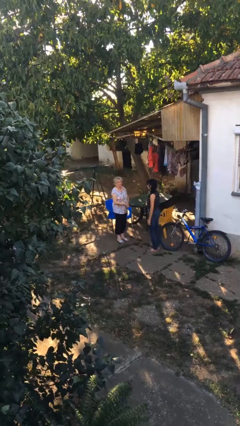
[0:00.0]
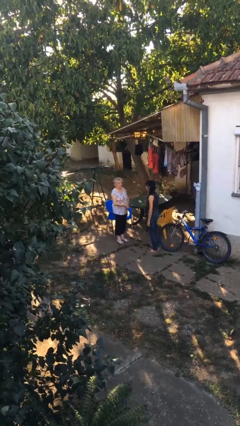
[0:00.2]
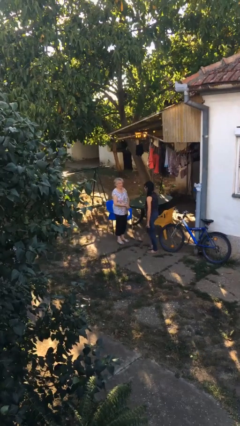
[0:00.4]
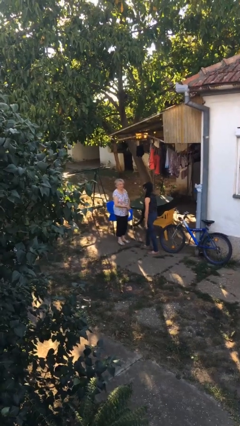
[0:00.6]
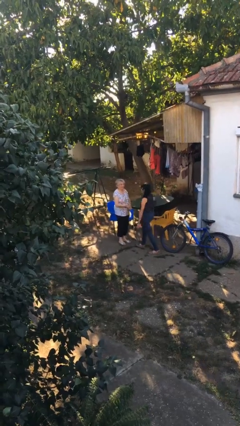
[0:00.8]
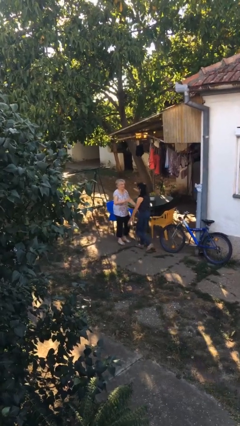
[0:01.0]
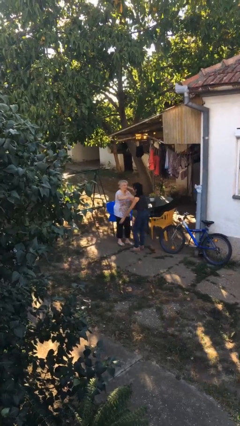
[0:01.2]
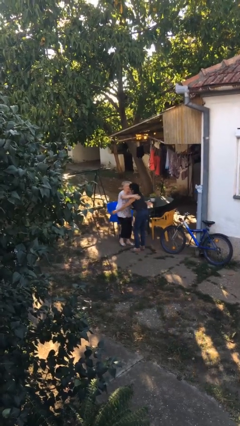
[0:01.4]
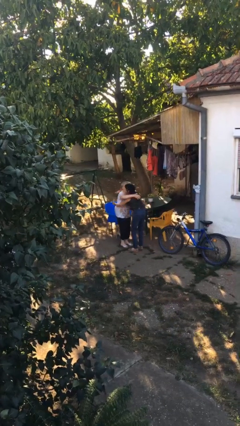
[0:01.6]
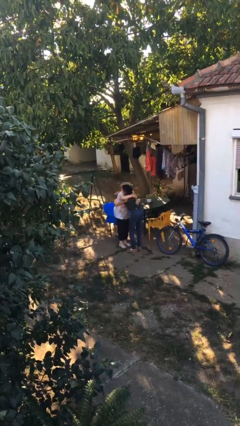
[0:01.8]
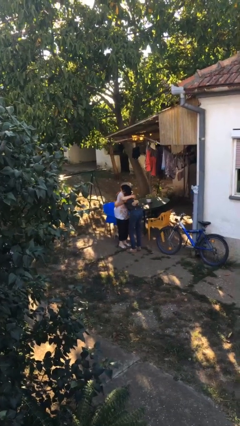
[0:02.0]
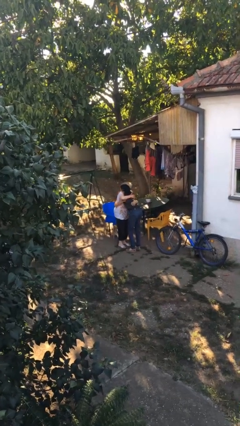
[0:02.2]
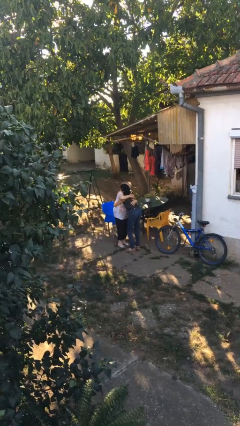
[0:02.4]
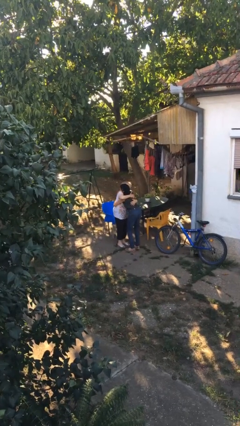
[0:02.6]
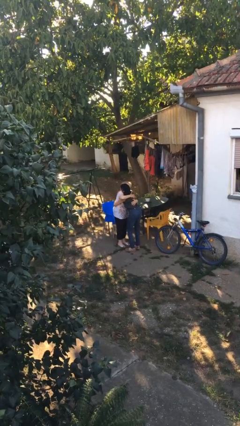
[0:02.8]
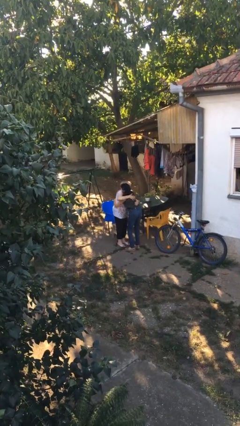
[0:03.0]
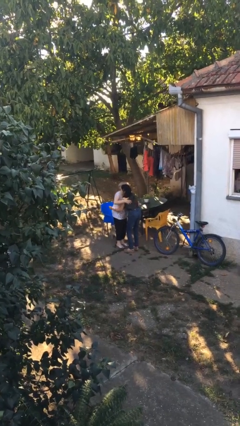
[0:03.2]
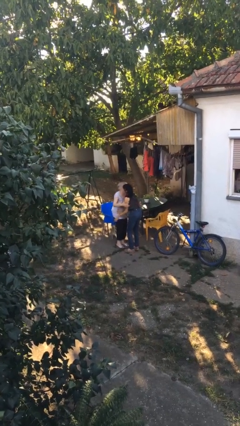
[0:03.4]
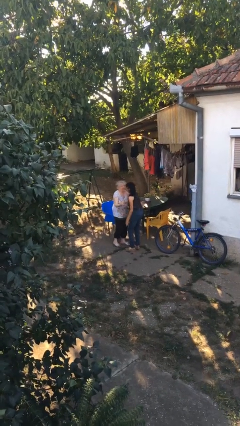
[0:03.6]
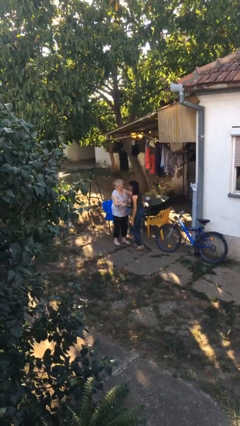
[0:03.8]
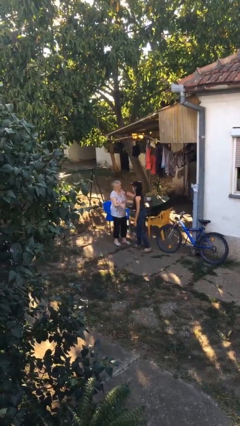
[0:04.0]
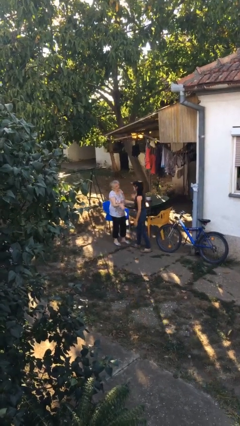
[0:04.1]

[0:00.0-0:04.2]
person embraces person

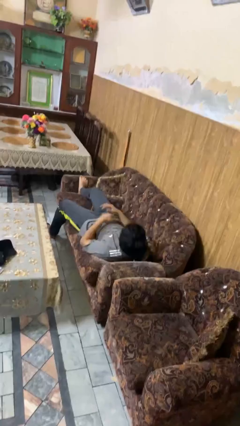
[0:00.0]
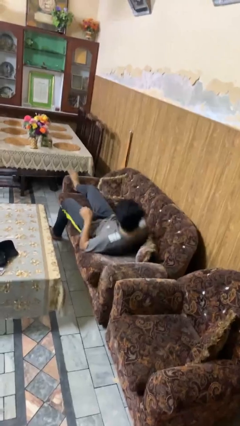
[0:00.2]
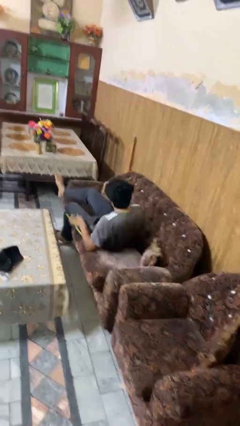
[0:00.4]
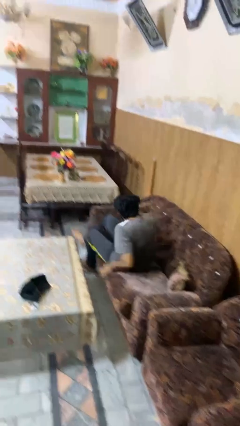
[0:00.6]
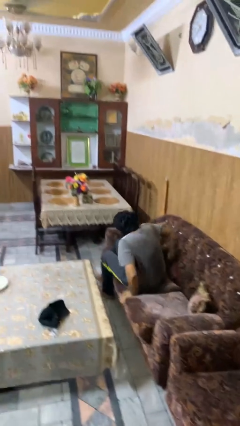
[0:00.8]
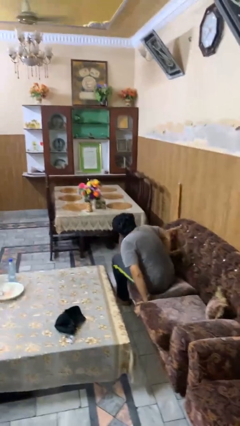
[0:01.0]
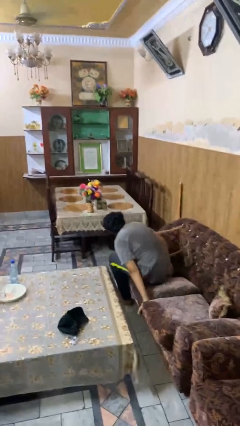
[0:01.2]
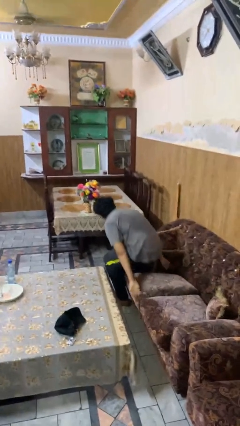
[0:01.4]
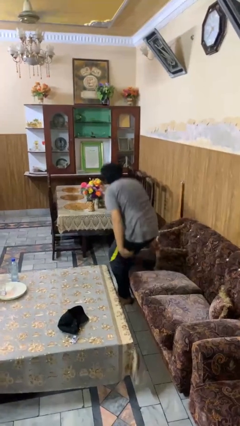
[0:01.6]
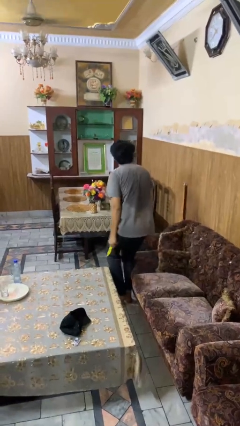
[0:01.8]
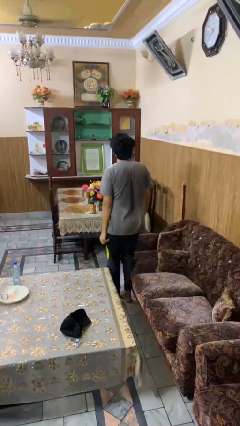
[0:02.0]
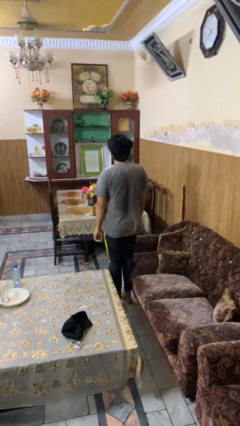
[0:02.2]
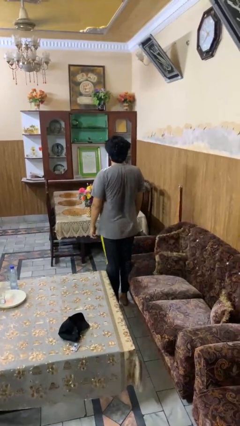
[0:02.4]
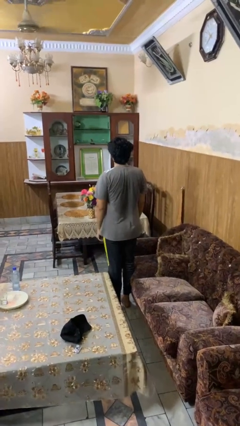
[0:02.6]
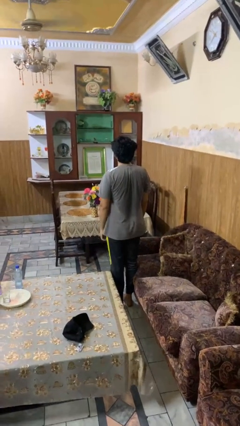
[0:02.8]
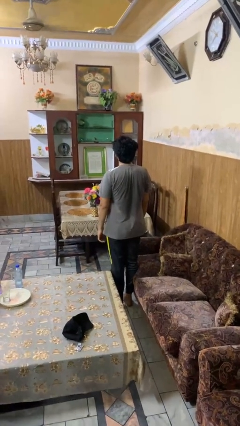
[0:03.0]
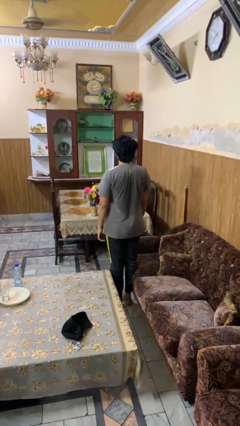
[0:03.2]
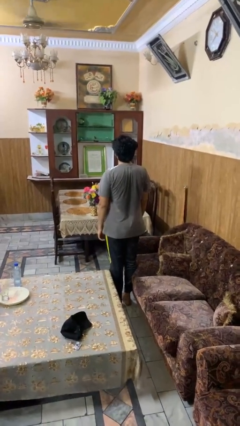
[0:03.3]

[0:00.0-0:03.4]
person stands up

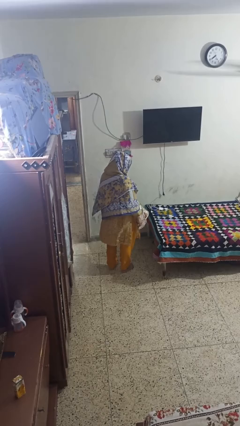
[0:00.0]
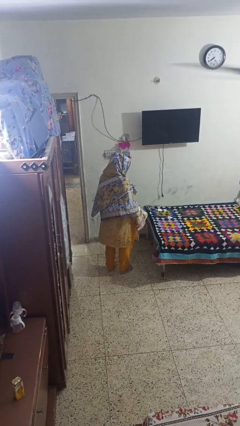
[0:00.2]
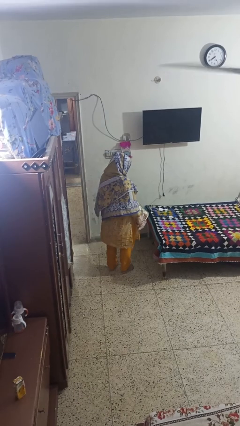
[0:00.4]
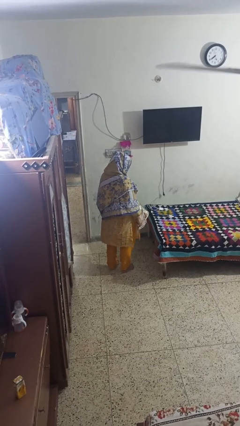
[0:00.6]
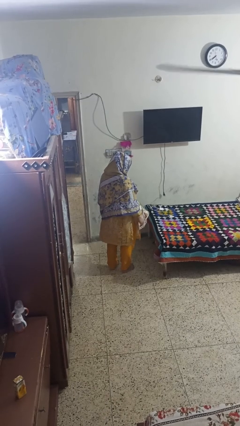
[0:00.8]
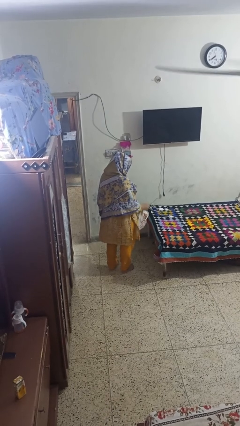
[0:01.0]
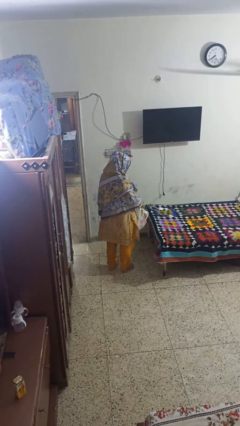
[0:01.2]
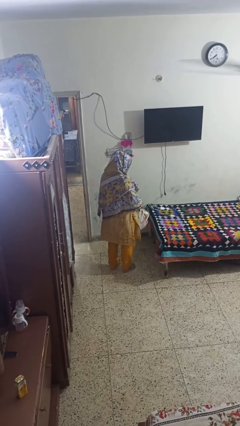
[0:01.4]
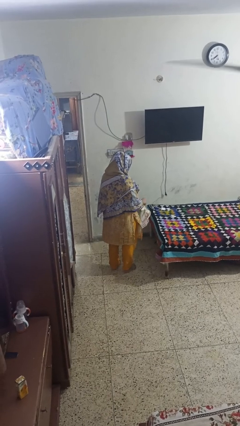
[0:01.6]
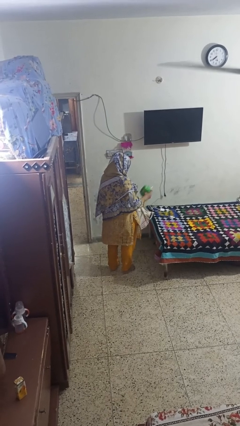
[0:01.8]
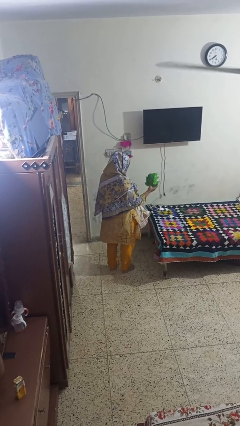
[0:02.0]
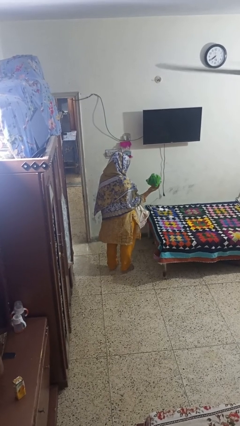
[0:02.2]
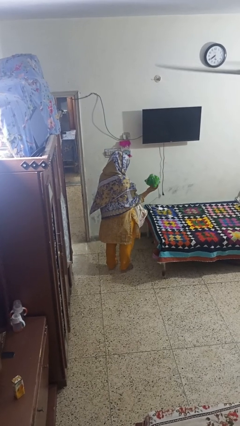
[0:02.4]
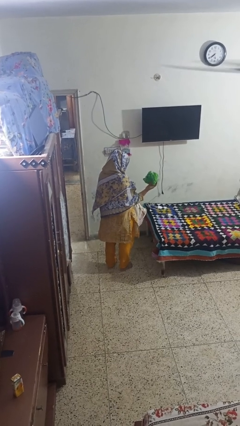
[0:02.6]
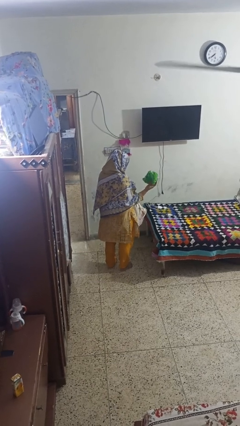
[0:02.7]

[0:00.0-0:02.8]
person takes object from bag

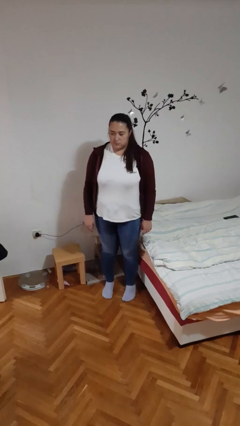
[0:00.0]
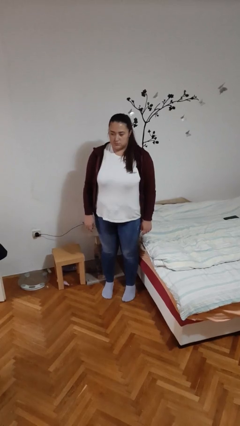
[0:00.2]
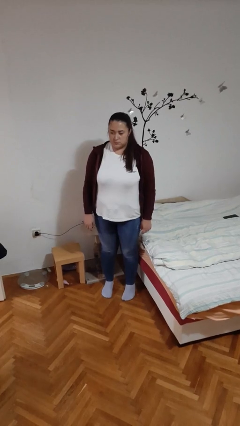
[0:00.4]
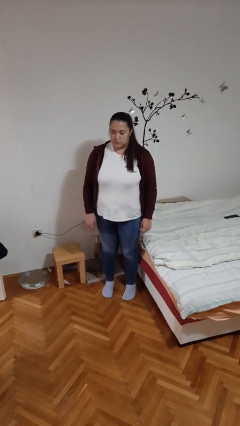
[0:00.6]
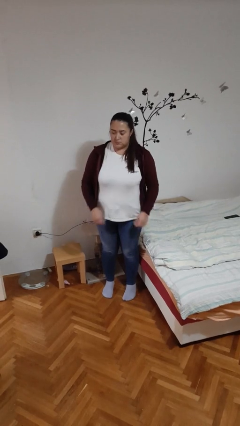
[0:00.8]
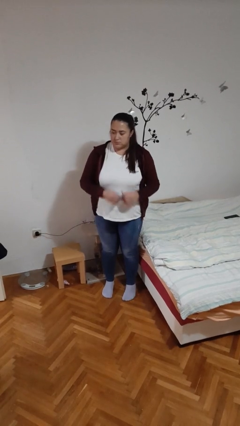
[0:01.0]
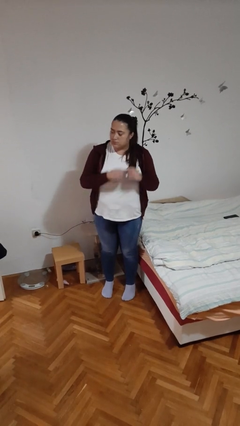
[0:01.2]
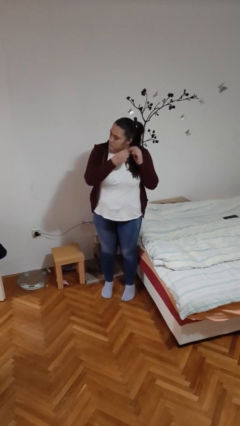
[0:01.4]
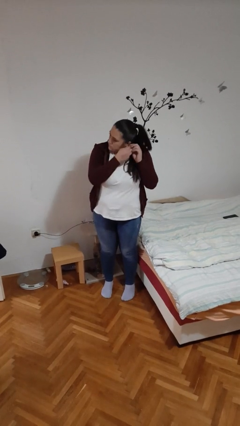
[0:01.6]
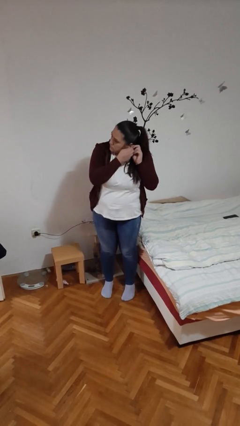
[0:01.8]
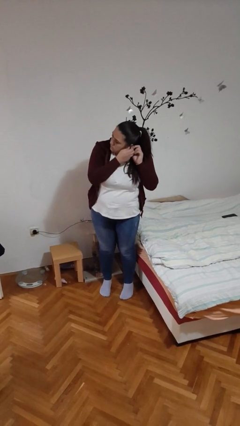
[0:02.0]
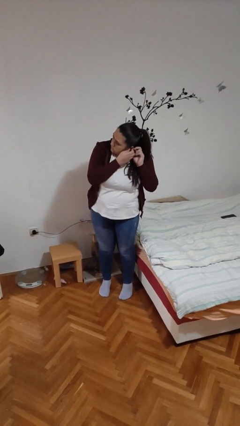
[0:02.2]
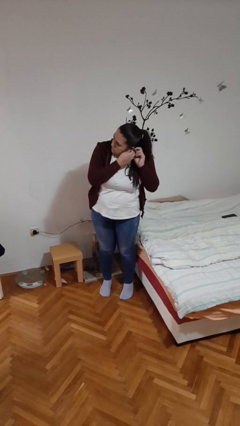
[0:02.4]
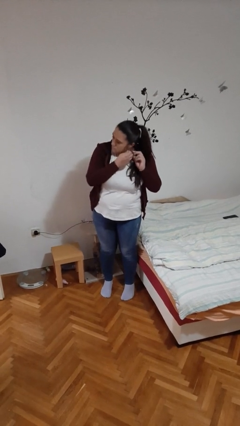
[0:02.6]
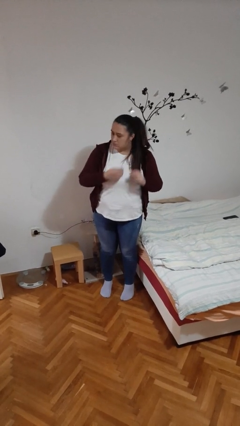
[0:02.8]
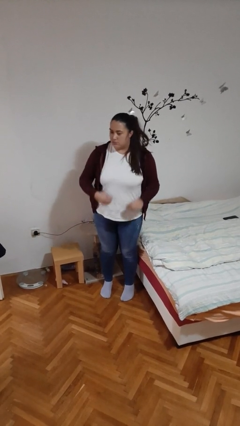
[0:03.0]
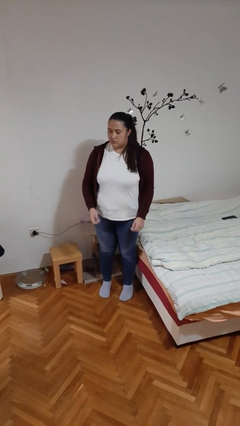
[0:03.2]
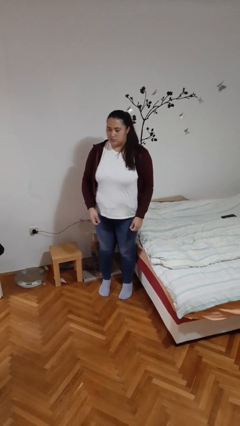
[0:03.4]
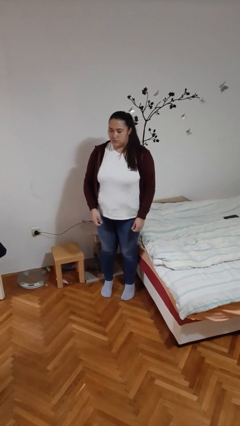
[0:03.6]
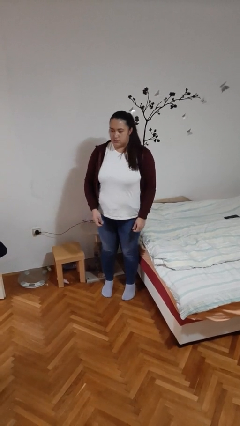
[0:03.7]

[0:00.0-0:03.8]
person puts on earrings

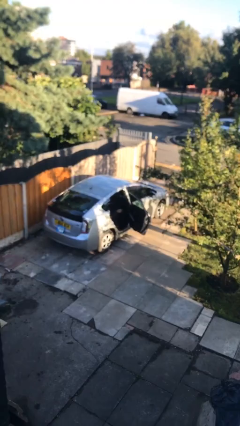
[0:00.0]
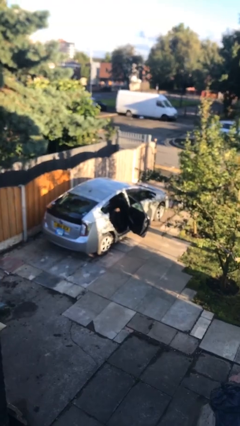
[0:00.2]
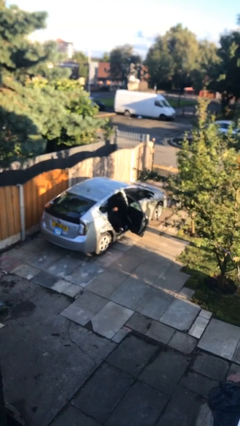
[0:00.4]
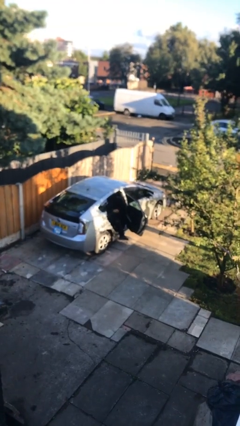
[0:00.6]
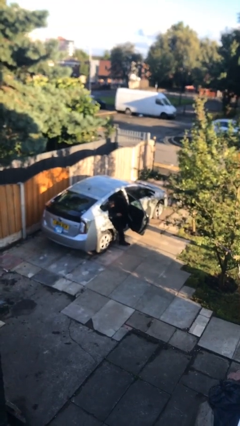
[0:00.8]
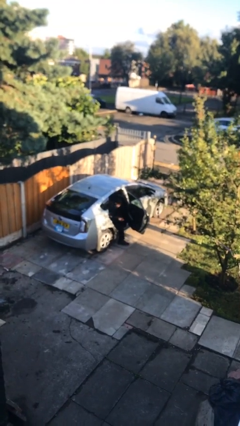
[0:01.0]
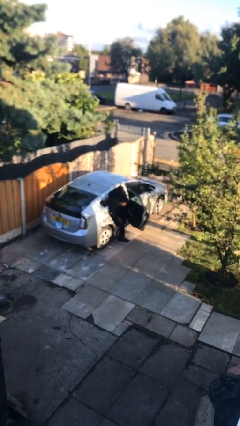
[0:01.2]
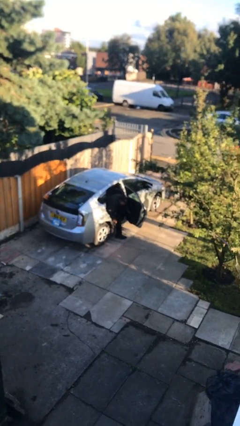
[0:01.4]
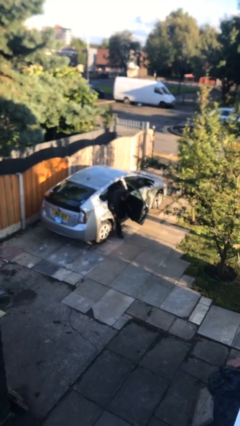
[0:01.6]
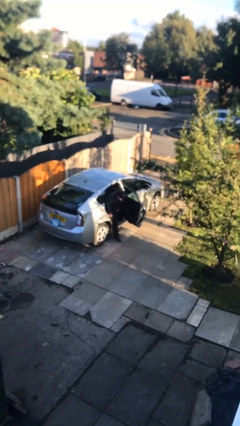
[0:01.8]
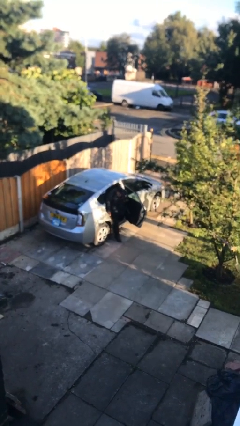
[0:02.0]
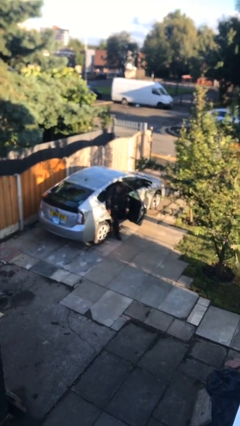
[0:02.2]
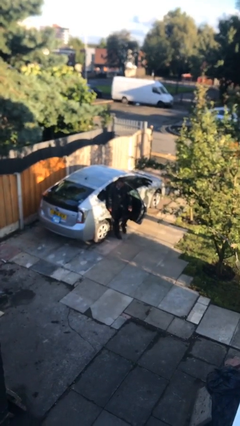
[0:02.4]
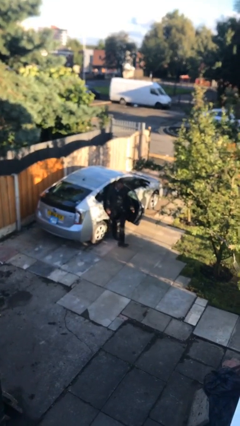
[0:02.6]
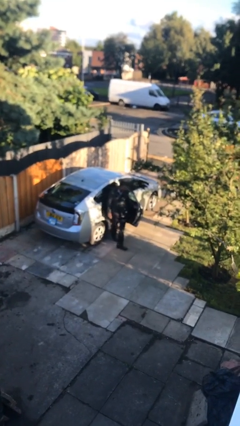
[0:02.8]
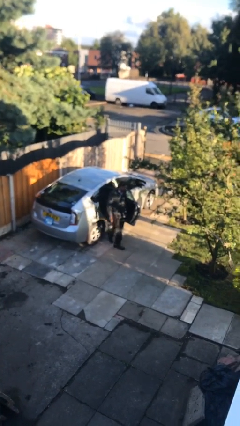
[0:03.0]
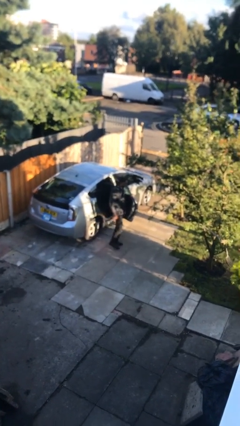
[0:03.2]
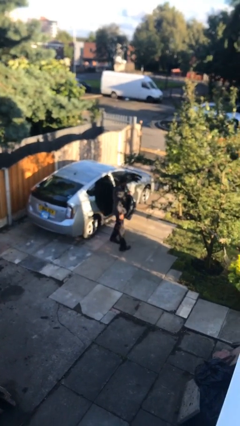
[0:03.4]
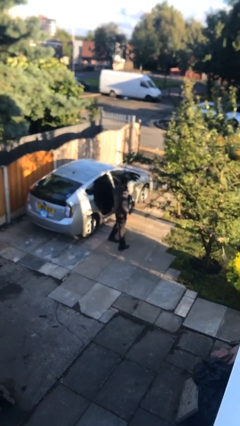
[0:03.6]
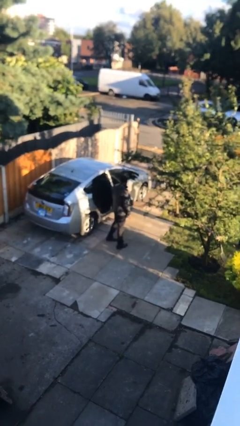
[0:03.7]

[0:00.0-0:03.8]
person exits car
